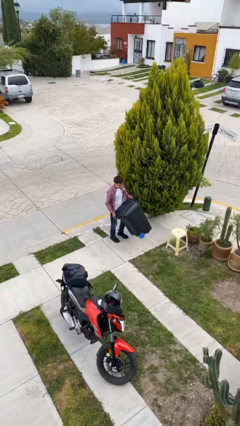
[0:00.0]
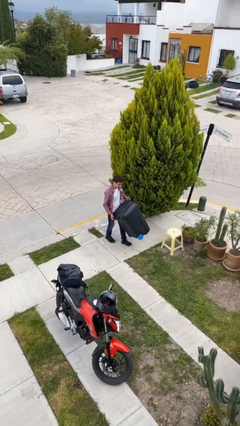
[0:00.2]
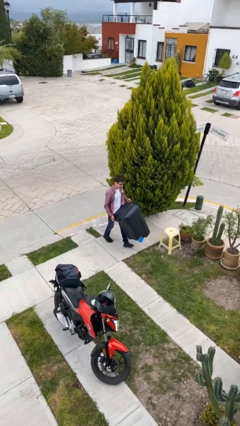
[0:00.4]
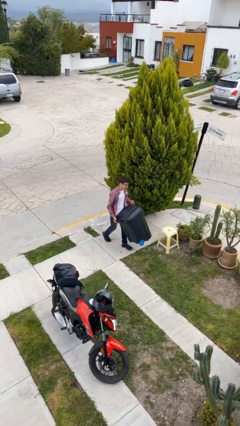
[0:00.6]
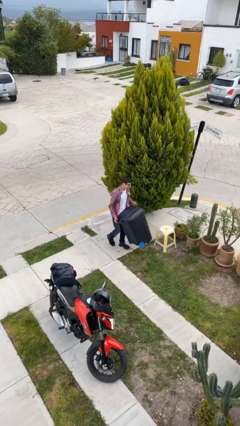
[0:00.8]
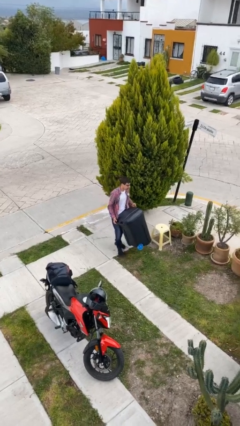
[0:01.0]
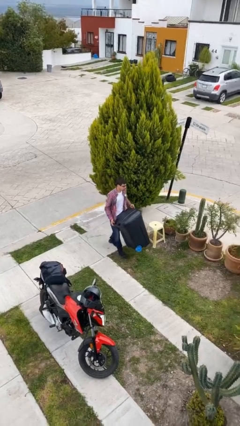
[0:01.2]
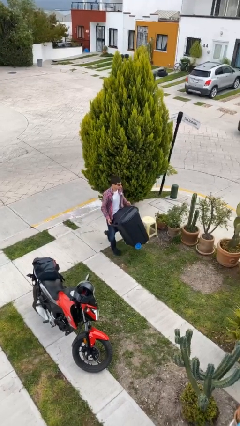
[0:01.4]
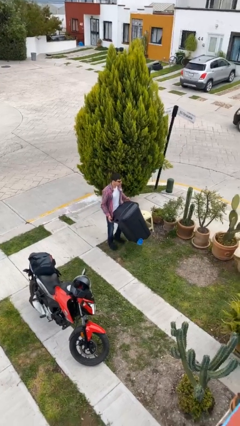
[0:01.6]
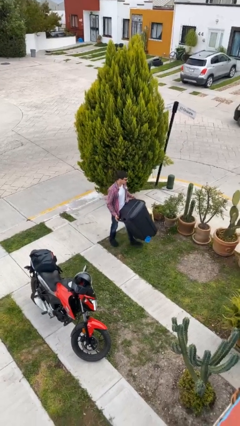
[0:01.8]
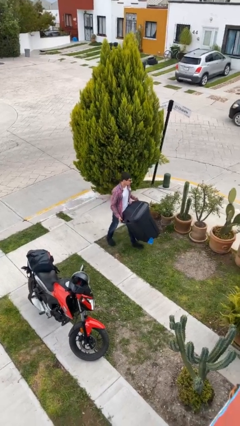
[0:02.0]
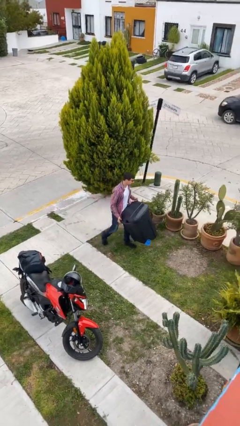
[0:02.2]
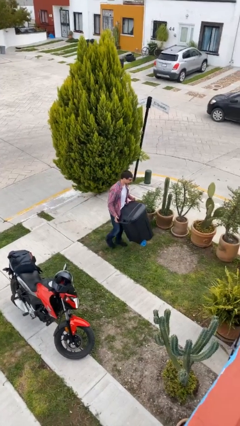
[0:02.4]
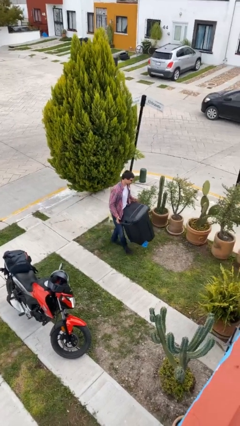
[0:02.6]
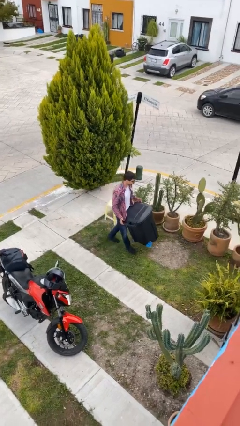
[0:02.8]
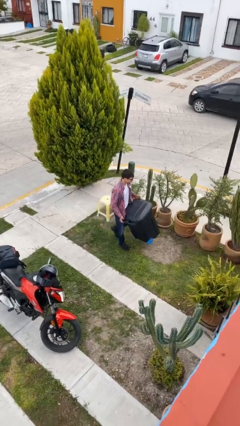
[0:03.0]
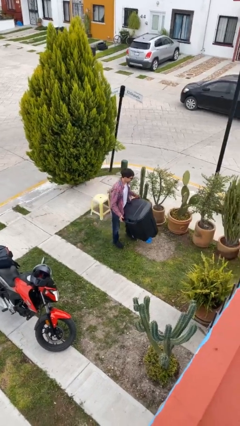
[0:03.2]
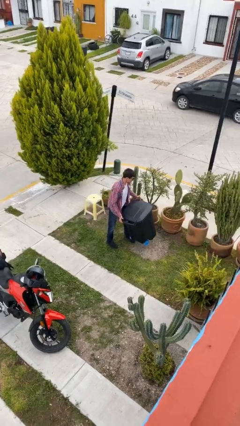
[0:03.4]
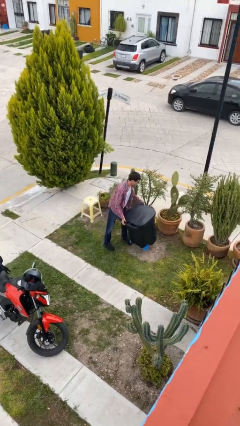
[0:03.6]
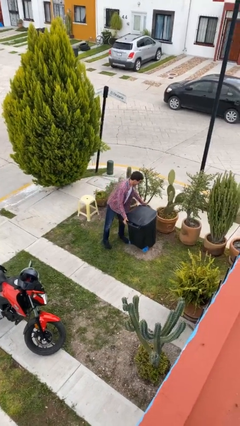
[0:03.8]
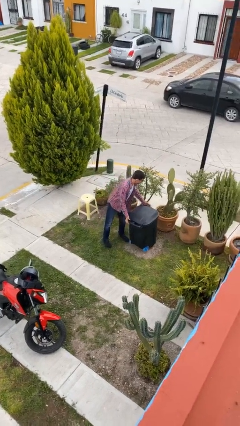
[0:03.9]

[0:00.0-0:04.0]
person carries heavy object

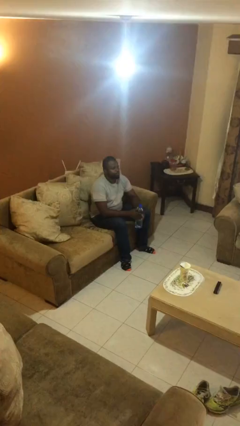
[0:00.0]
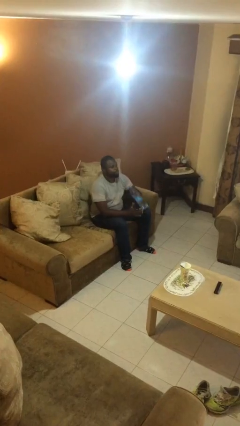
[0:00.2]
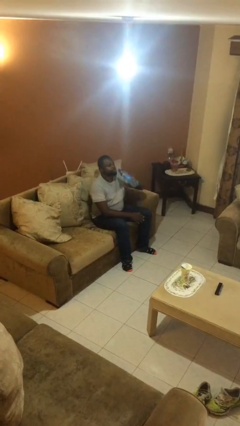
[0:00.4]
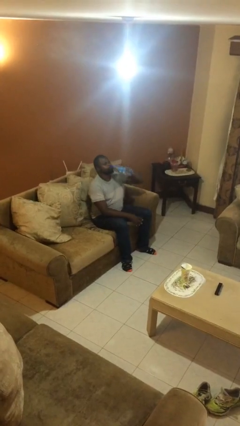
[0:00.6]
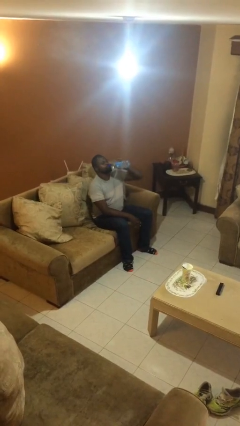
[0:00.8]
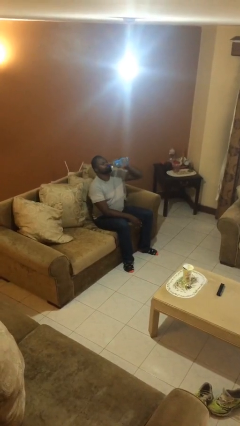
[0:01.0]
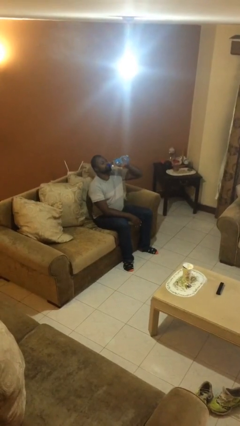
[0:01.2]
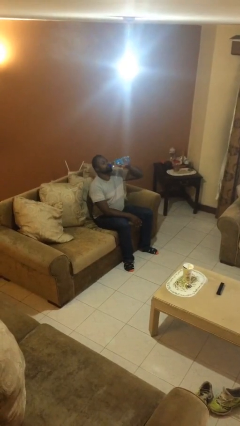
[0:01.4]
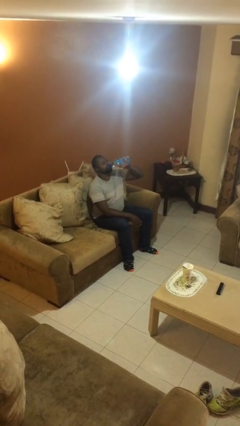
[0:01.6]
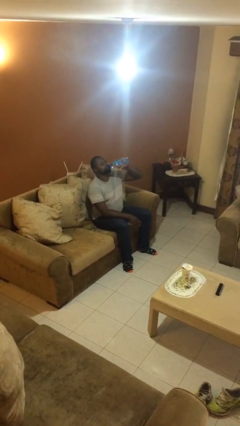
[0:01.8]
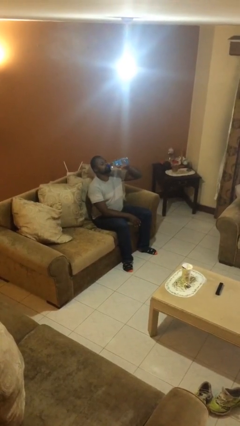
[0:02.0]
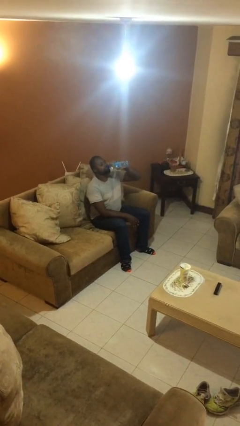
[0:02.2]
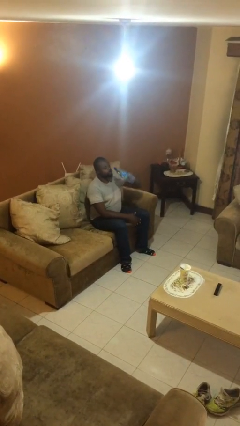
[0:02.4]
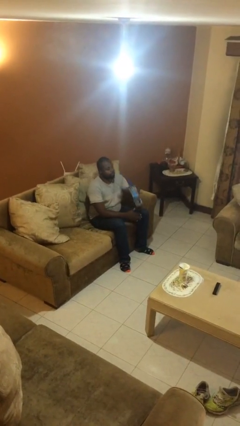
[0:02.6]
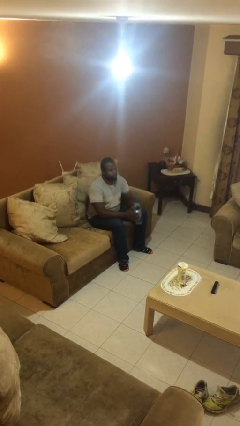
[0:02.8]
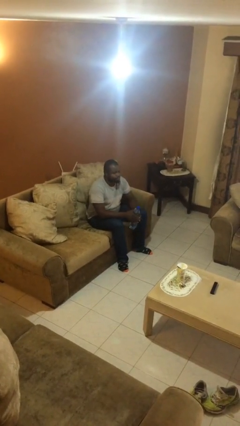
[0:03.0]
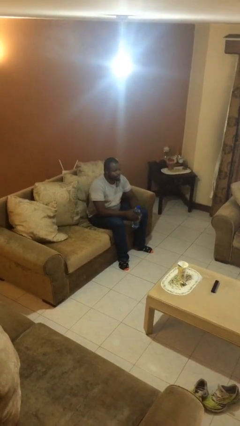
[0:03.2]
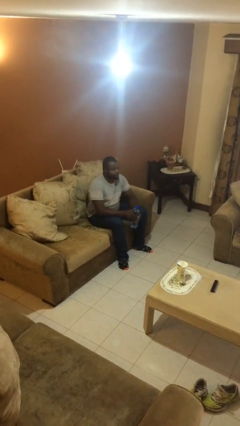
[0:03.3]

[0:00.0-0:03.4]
person drinks from bottle

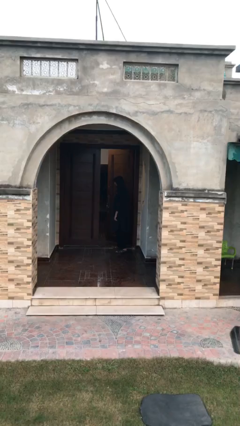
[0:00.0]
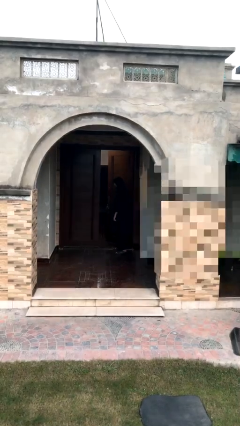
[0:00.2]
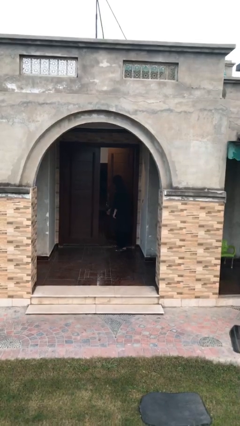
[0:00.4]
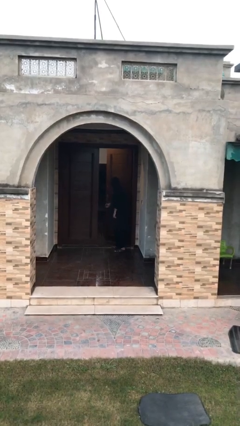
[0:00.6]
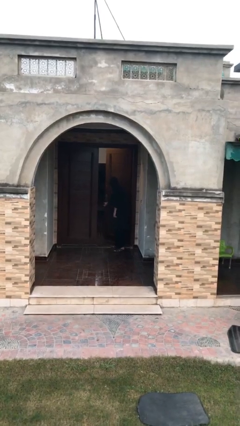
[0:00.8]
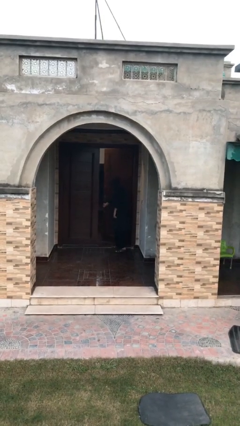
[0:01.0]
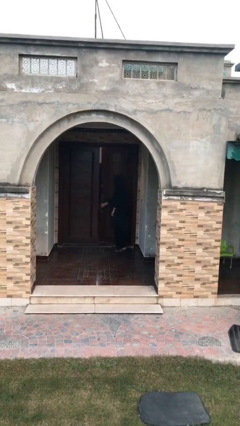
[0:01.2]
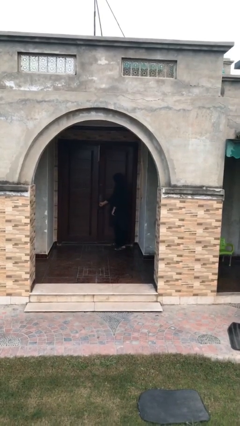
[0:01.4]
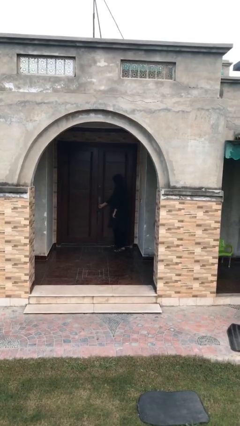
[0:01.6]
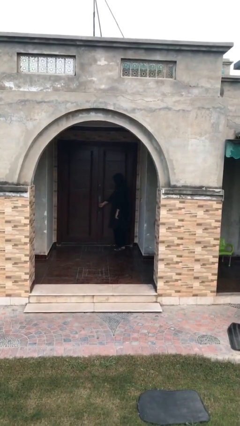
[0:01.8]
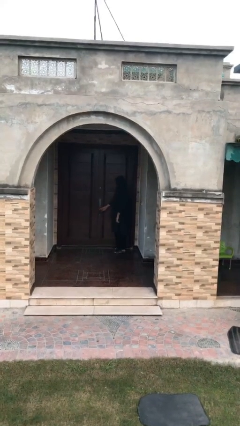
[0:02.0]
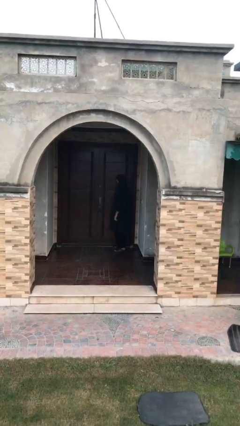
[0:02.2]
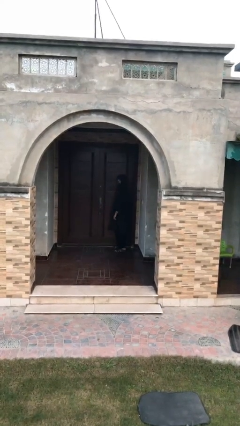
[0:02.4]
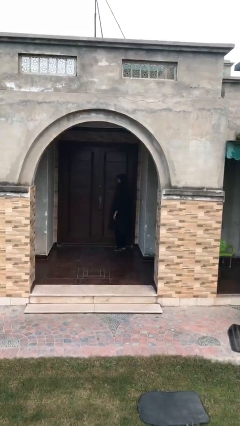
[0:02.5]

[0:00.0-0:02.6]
person closes facility door

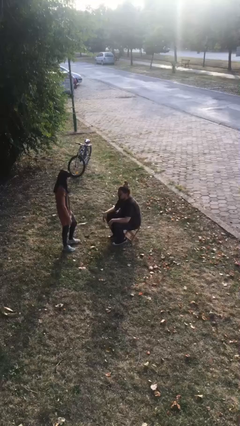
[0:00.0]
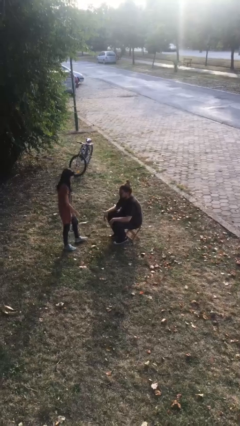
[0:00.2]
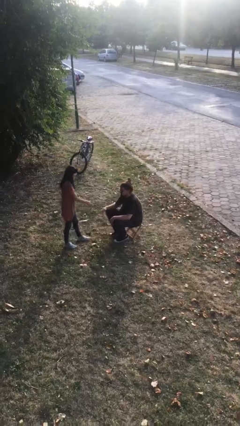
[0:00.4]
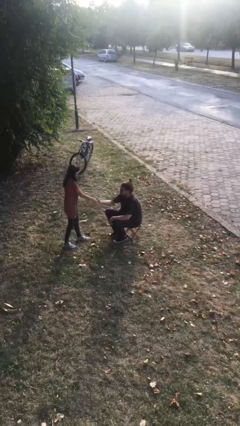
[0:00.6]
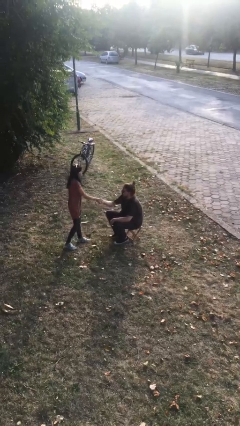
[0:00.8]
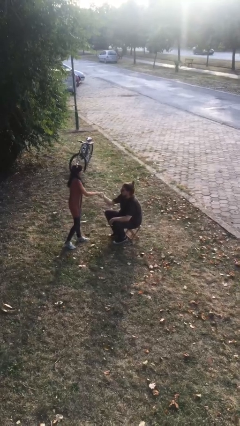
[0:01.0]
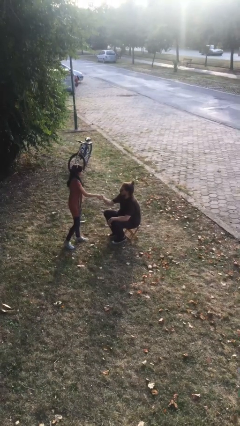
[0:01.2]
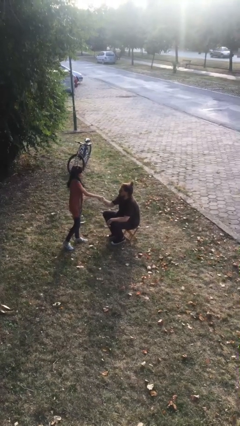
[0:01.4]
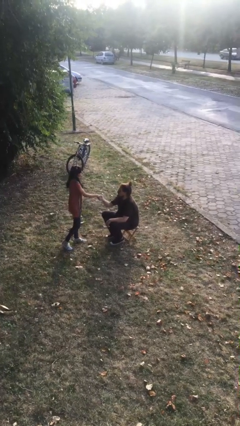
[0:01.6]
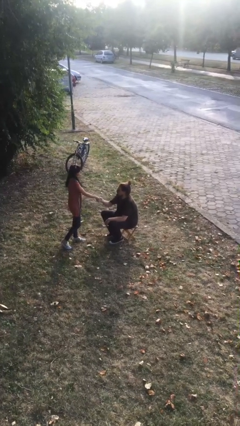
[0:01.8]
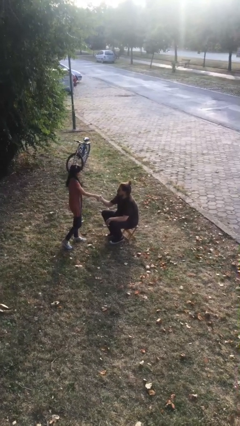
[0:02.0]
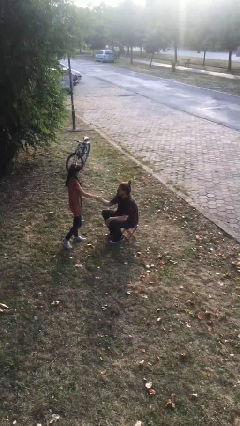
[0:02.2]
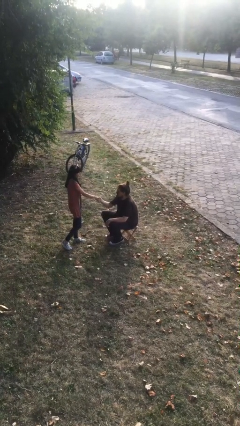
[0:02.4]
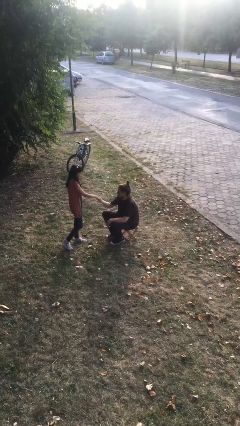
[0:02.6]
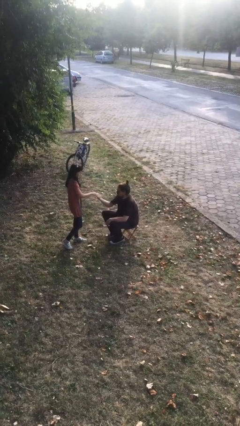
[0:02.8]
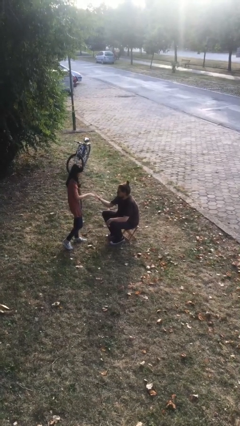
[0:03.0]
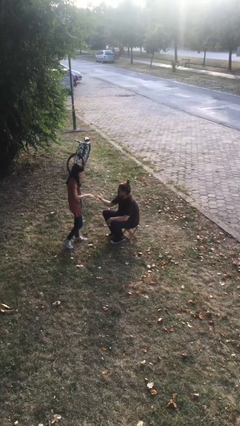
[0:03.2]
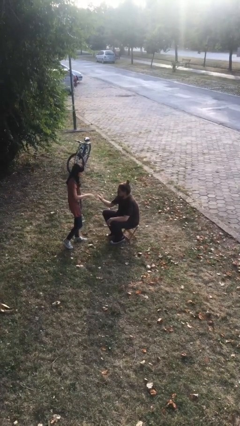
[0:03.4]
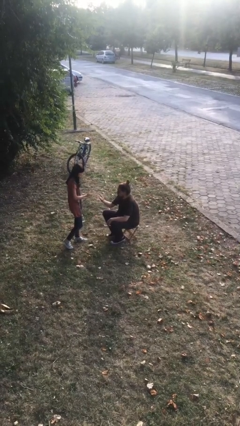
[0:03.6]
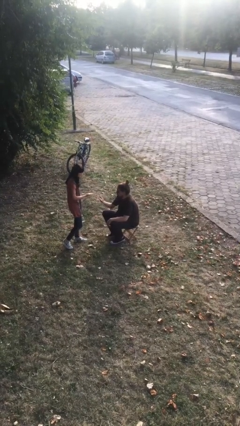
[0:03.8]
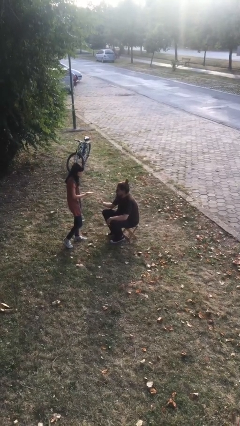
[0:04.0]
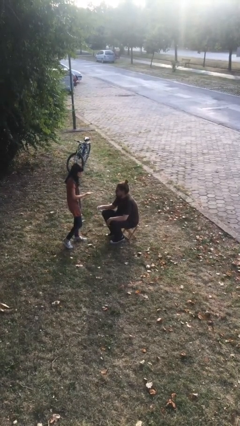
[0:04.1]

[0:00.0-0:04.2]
person shakes hand

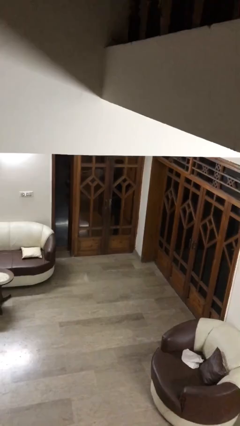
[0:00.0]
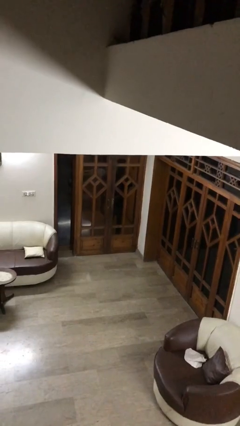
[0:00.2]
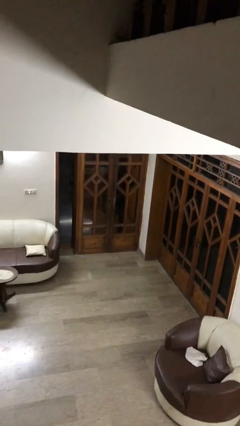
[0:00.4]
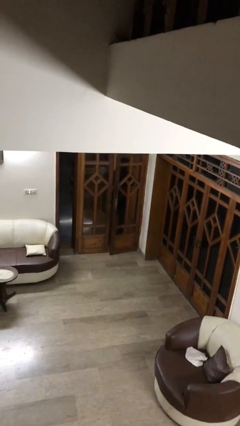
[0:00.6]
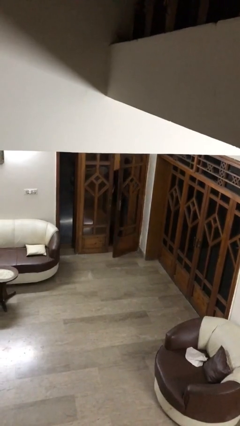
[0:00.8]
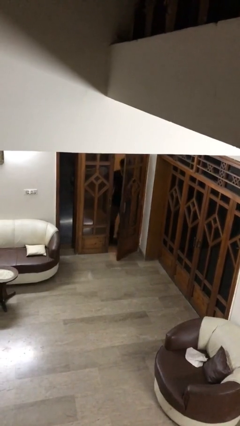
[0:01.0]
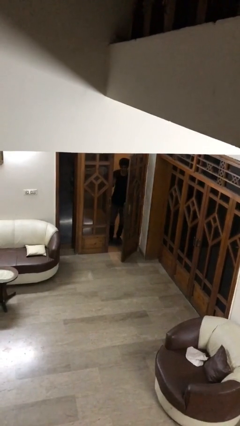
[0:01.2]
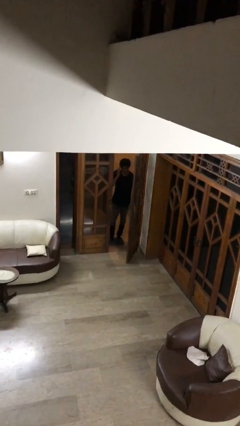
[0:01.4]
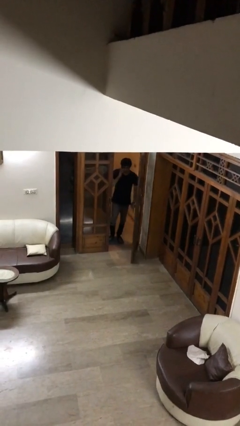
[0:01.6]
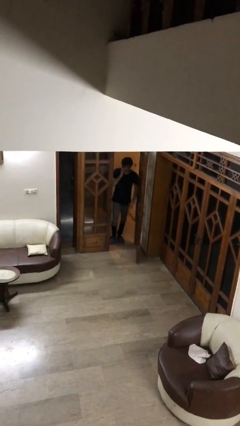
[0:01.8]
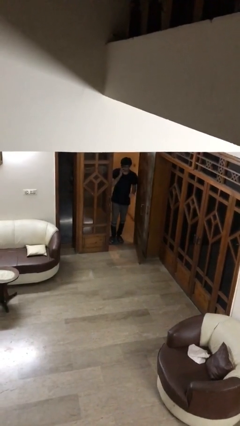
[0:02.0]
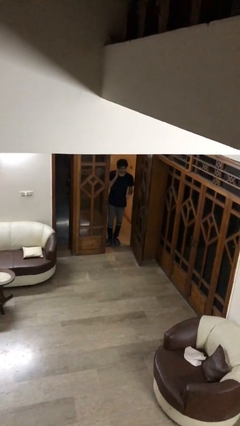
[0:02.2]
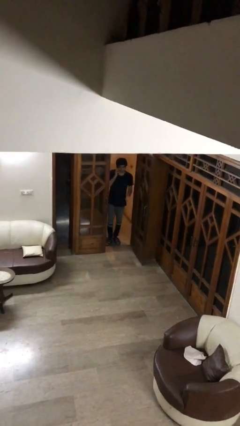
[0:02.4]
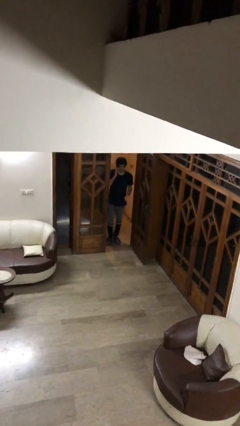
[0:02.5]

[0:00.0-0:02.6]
person opens facility door

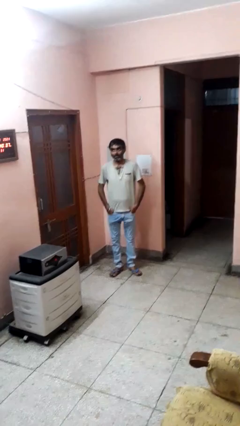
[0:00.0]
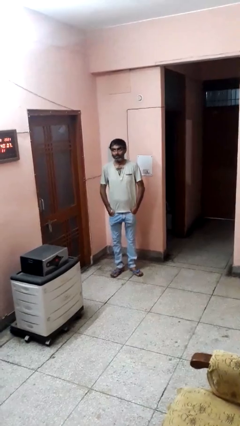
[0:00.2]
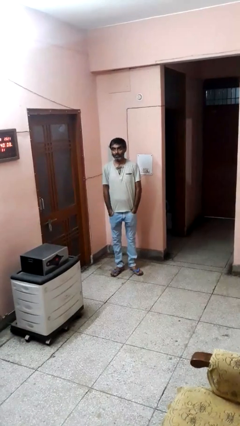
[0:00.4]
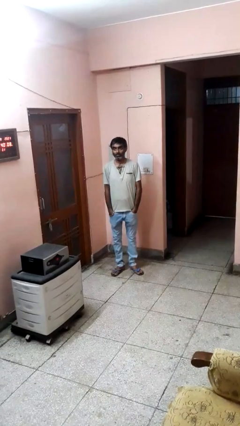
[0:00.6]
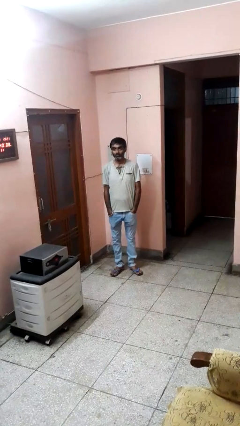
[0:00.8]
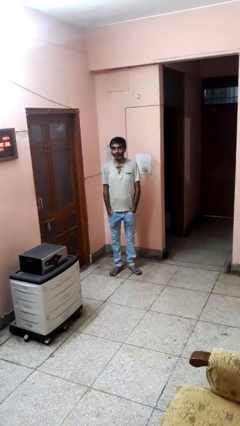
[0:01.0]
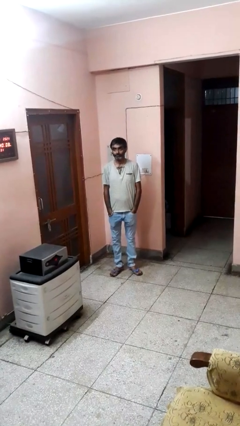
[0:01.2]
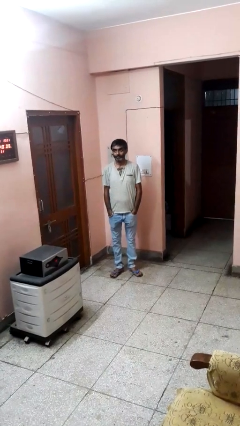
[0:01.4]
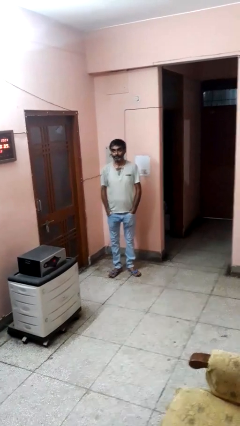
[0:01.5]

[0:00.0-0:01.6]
person puts hands in back pockets
